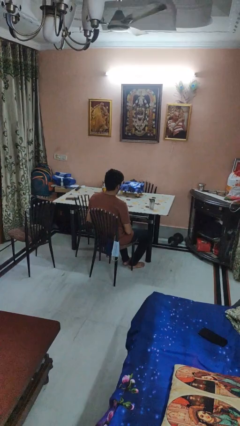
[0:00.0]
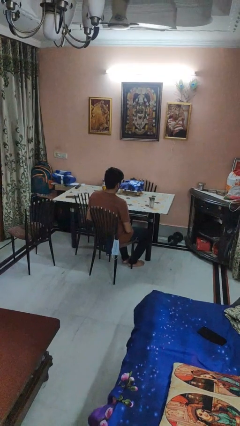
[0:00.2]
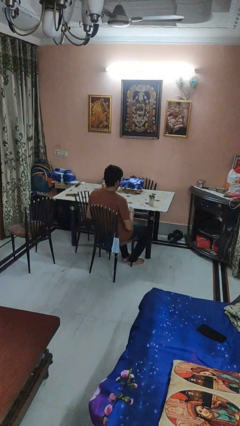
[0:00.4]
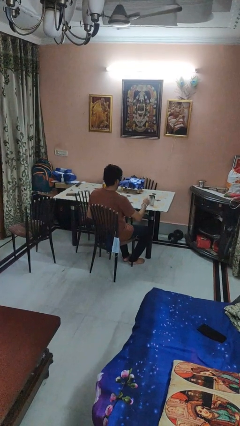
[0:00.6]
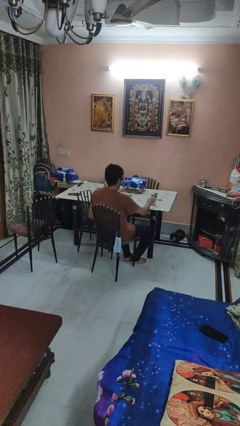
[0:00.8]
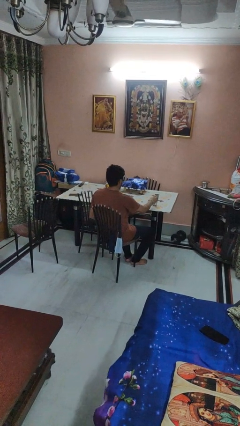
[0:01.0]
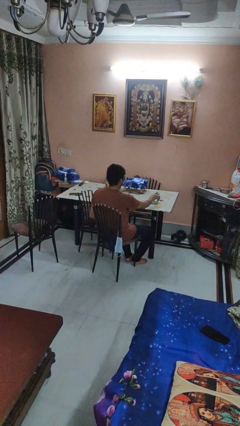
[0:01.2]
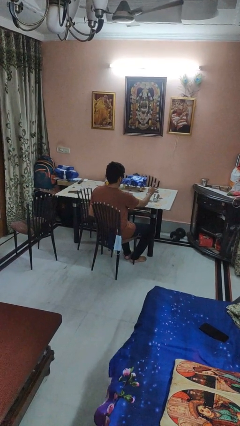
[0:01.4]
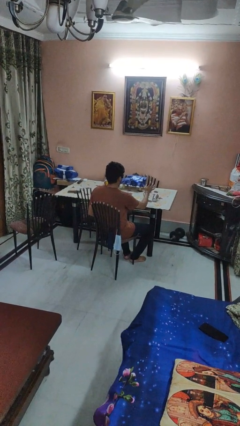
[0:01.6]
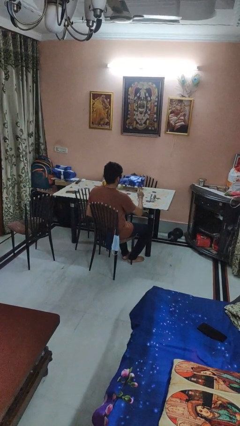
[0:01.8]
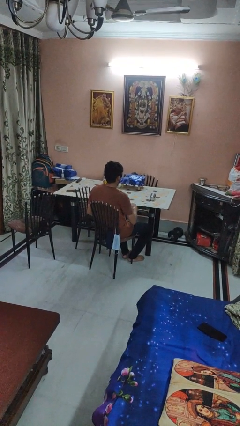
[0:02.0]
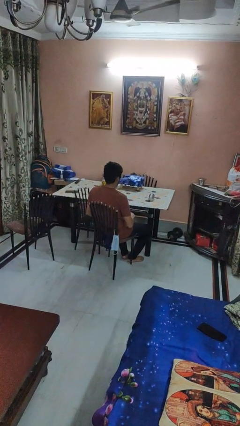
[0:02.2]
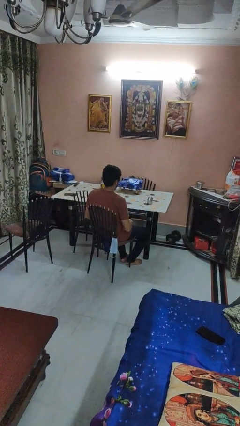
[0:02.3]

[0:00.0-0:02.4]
person knocks over glass

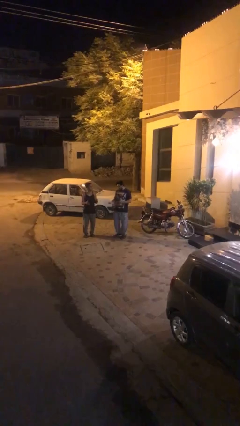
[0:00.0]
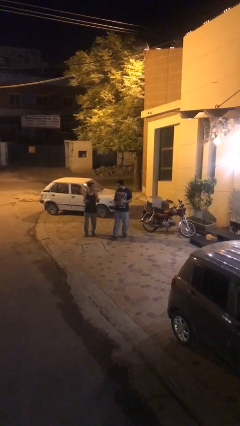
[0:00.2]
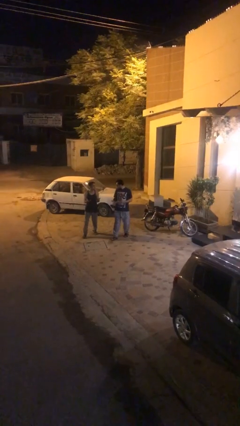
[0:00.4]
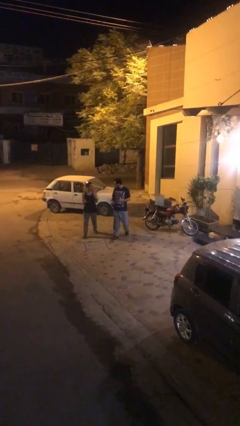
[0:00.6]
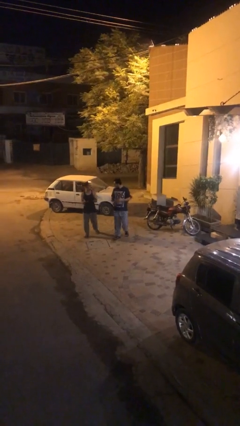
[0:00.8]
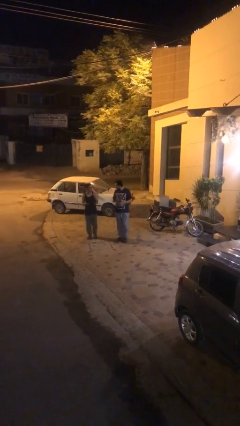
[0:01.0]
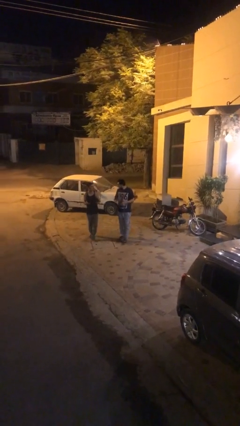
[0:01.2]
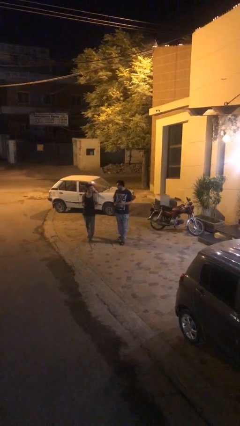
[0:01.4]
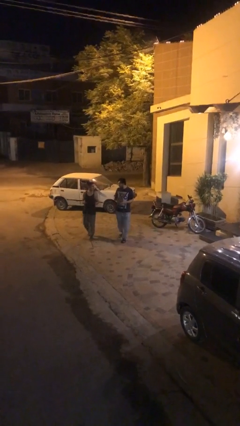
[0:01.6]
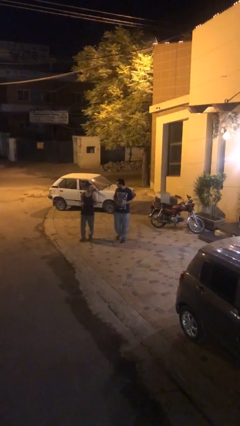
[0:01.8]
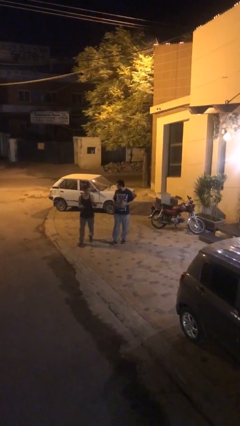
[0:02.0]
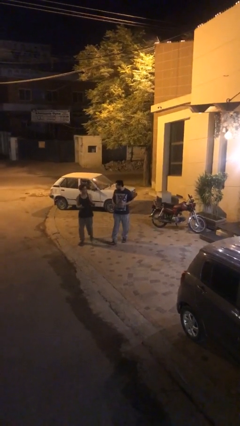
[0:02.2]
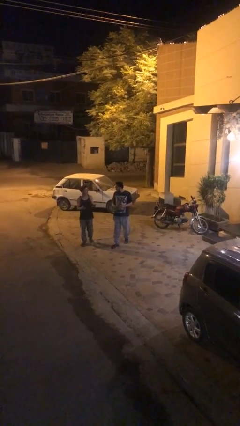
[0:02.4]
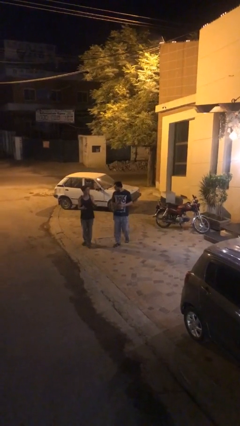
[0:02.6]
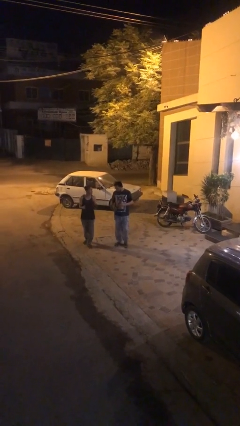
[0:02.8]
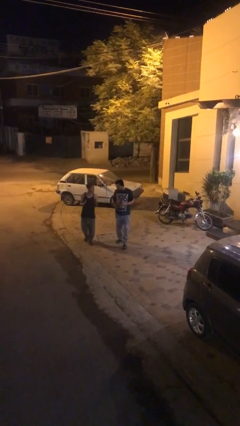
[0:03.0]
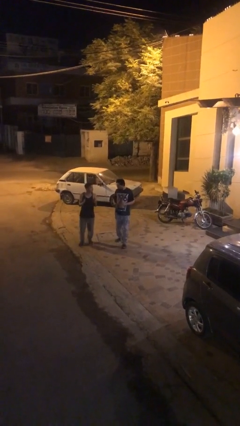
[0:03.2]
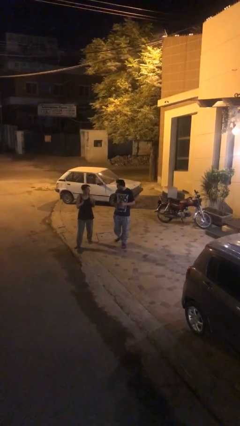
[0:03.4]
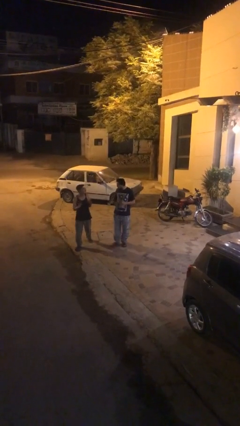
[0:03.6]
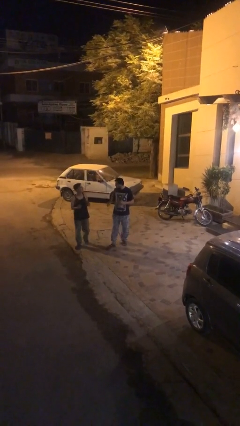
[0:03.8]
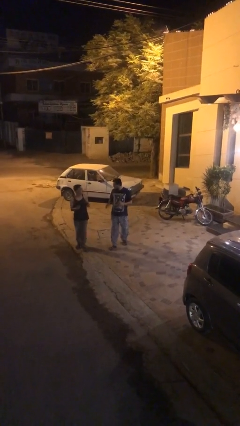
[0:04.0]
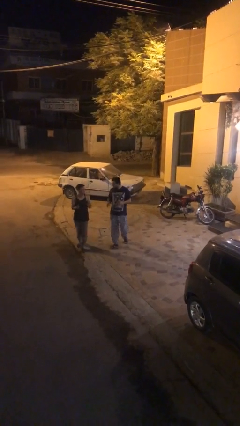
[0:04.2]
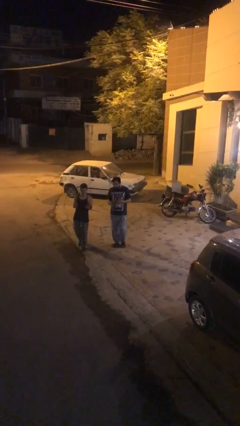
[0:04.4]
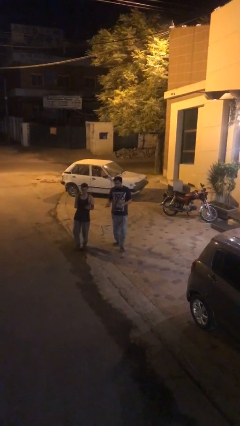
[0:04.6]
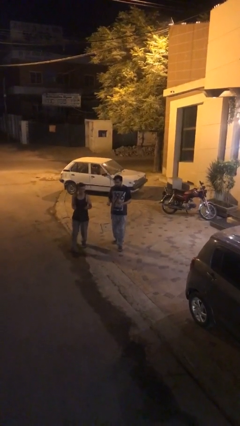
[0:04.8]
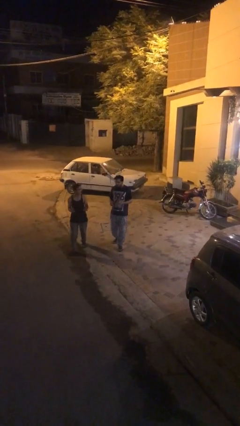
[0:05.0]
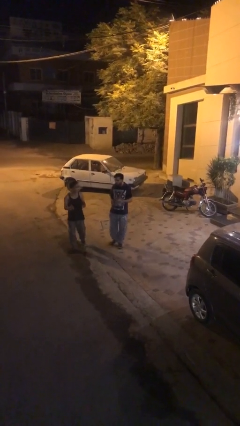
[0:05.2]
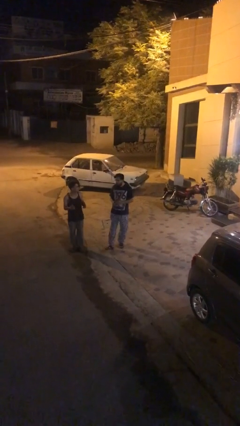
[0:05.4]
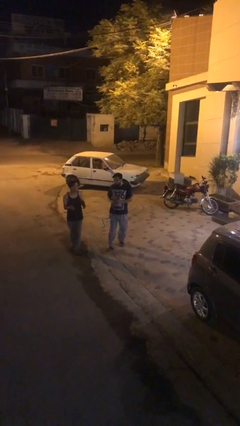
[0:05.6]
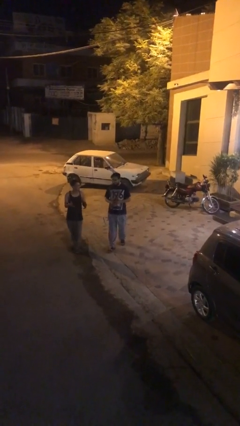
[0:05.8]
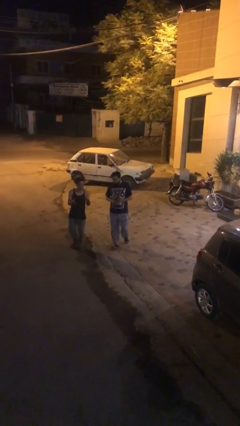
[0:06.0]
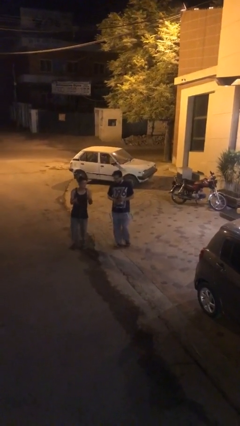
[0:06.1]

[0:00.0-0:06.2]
person talks to person

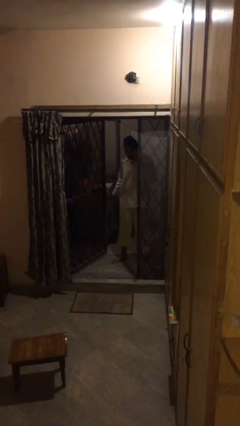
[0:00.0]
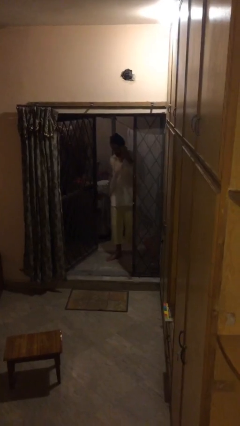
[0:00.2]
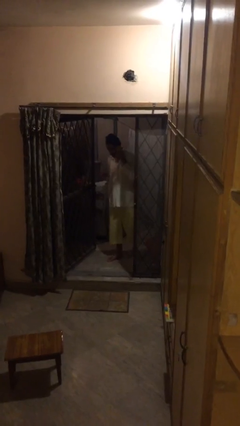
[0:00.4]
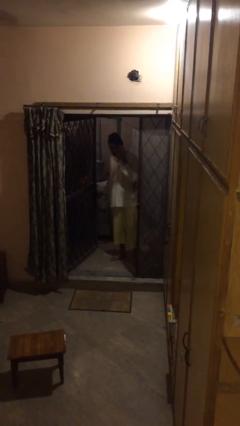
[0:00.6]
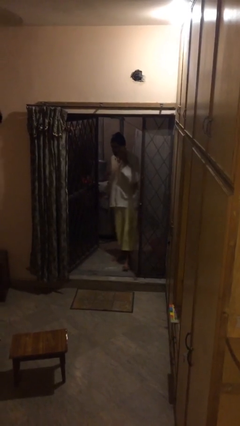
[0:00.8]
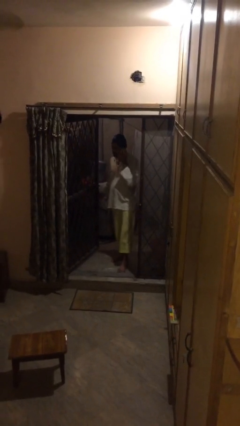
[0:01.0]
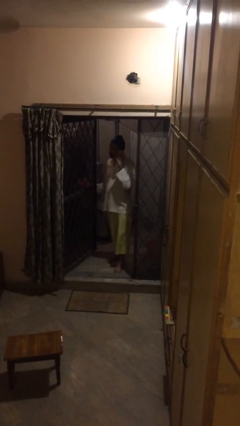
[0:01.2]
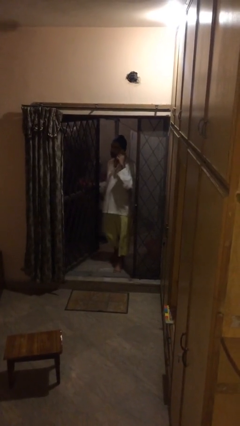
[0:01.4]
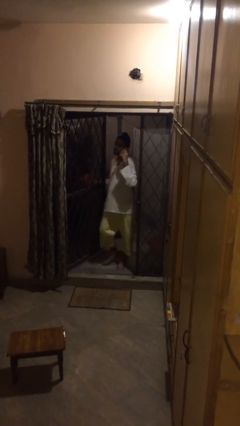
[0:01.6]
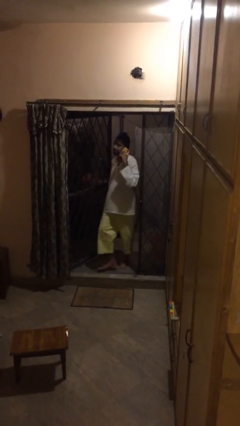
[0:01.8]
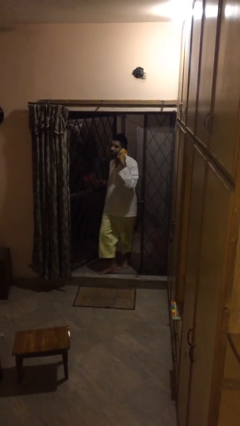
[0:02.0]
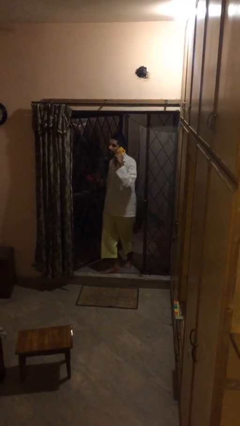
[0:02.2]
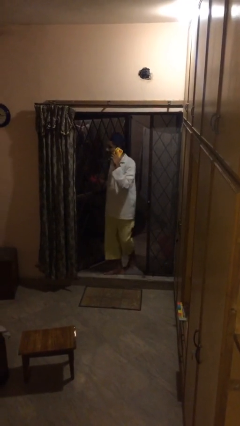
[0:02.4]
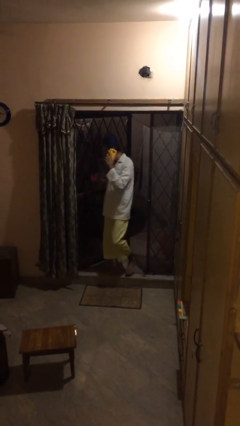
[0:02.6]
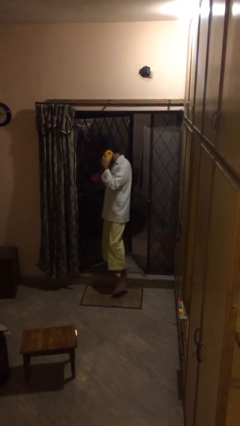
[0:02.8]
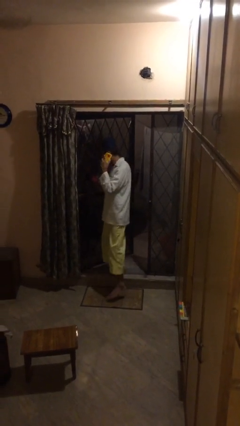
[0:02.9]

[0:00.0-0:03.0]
person enters scene through structure

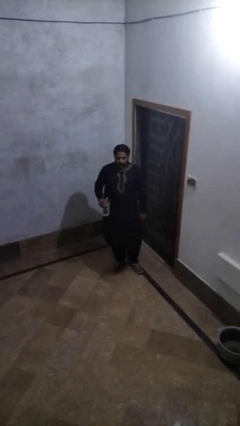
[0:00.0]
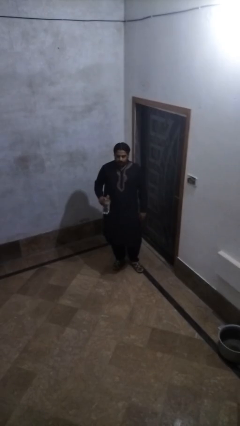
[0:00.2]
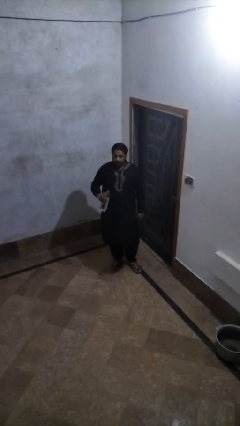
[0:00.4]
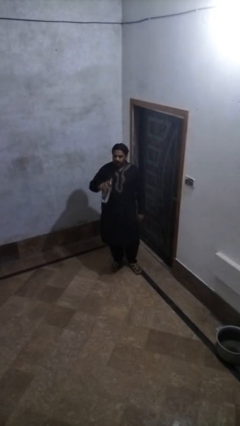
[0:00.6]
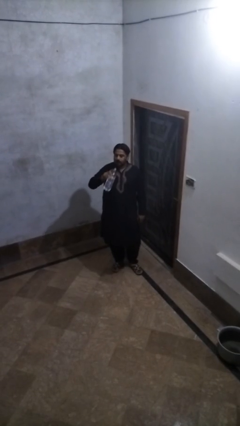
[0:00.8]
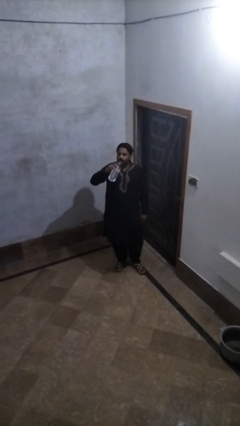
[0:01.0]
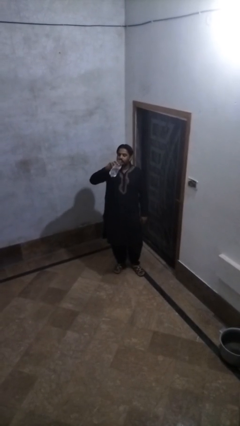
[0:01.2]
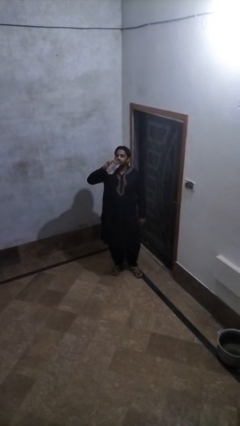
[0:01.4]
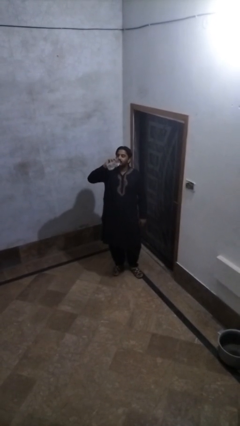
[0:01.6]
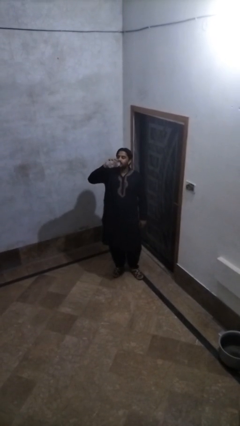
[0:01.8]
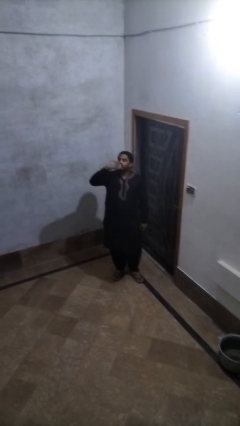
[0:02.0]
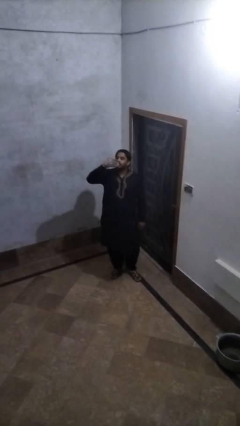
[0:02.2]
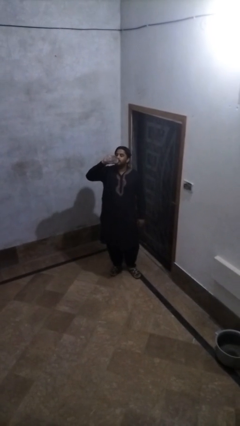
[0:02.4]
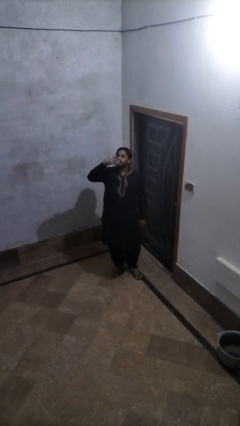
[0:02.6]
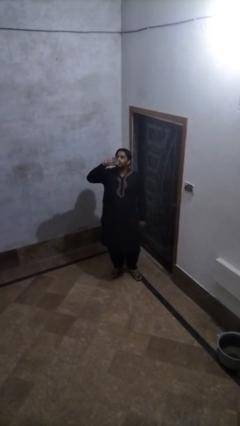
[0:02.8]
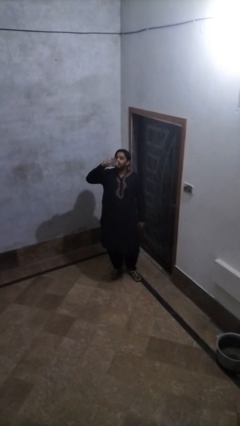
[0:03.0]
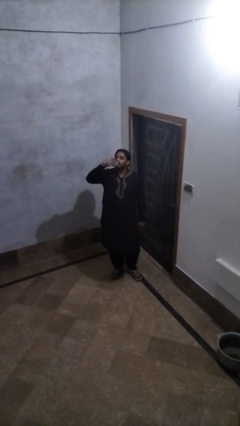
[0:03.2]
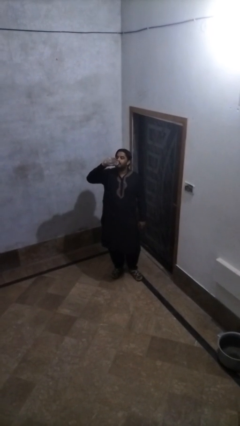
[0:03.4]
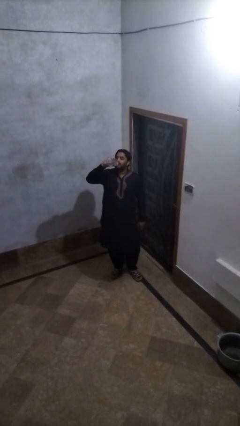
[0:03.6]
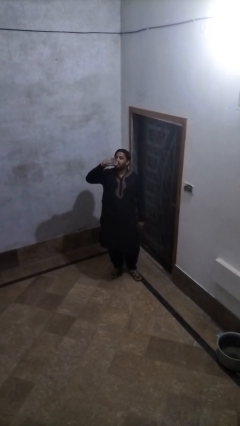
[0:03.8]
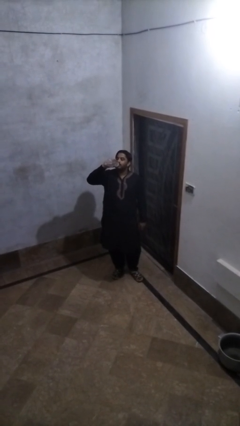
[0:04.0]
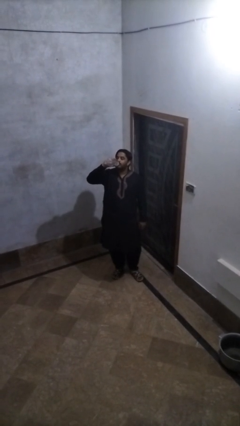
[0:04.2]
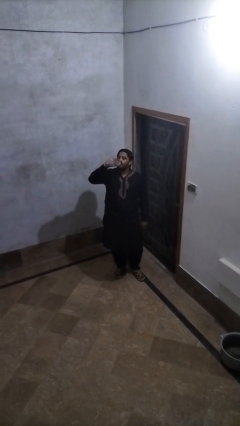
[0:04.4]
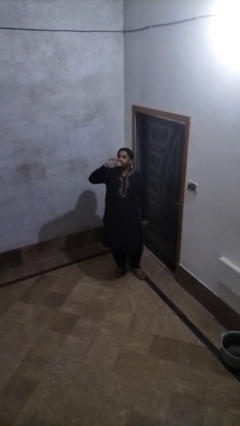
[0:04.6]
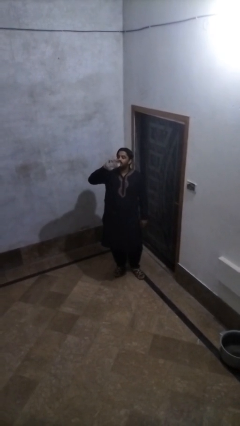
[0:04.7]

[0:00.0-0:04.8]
person drinks from bottle

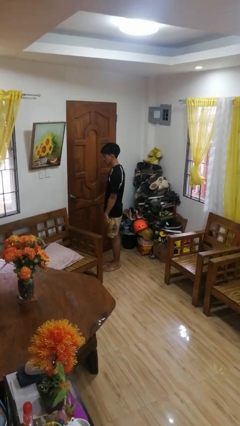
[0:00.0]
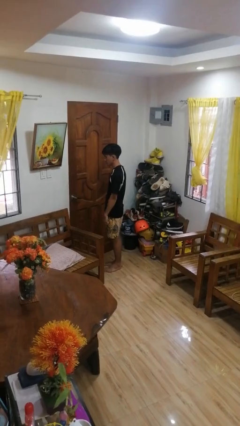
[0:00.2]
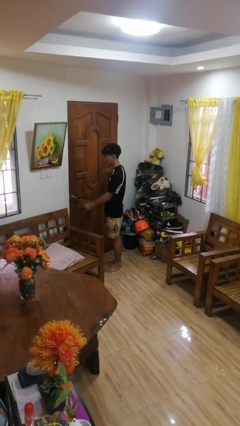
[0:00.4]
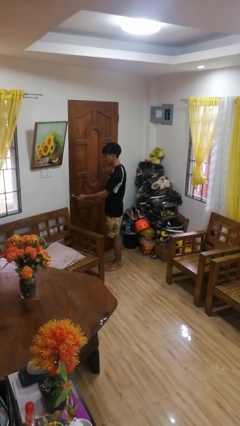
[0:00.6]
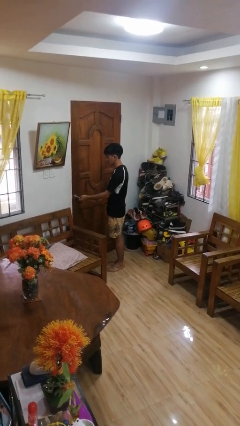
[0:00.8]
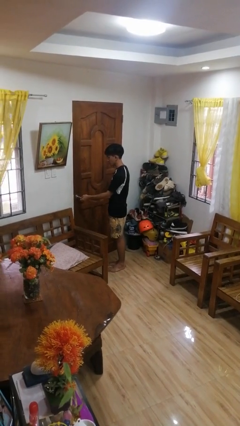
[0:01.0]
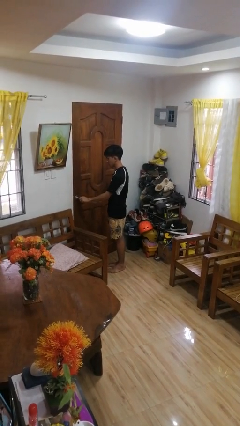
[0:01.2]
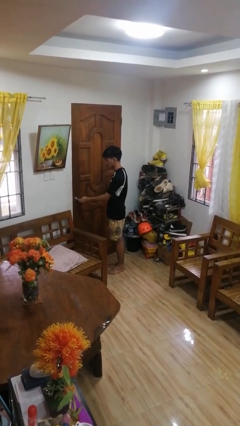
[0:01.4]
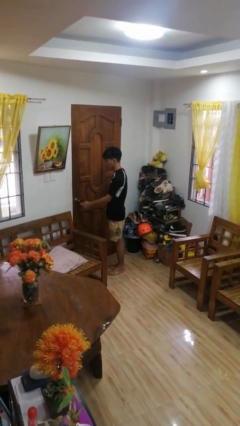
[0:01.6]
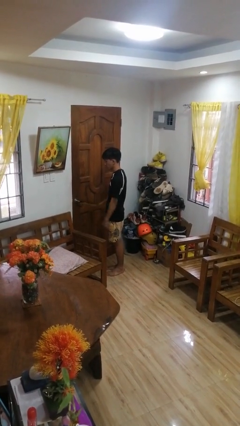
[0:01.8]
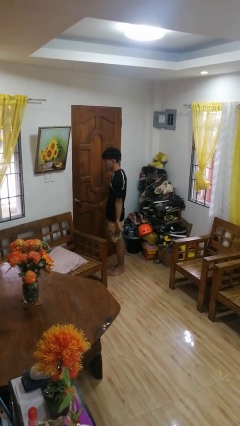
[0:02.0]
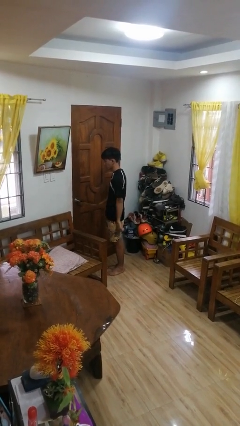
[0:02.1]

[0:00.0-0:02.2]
person locks door with keys
